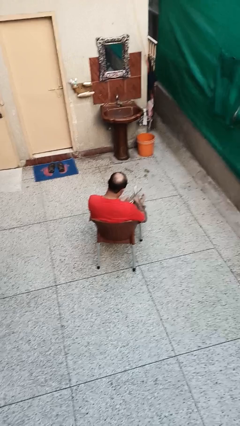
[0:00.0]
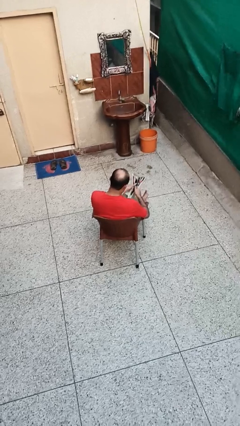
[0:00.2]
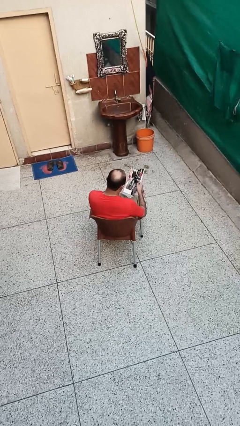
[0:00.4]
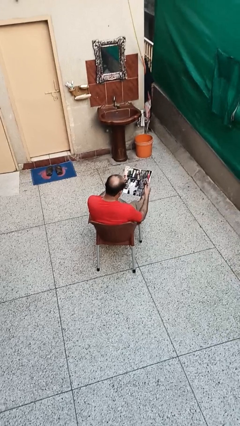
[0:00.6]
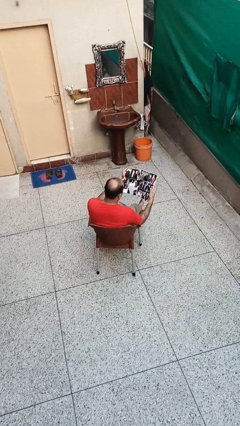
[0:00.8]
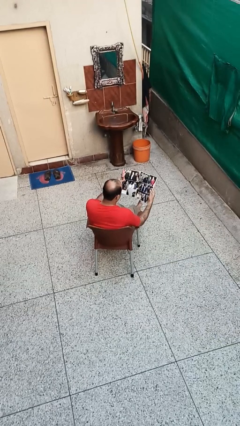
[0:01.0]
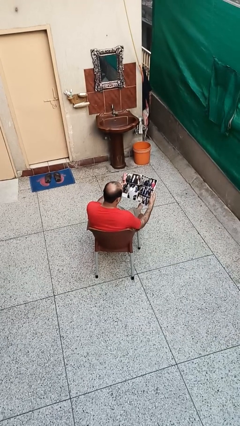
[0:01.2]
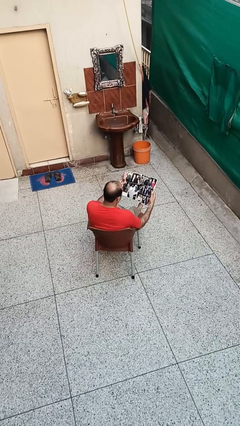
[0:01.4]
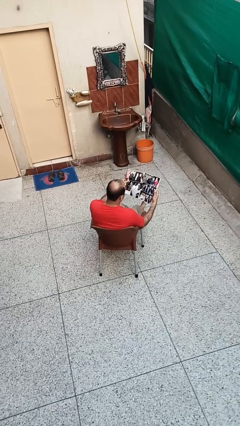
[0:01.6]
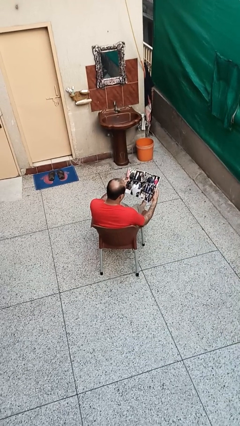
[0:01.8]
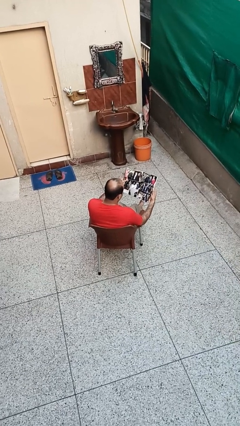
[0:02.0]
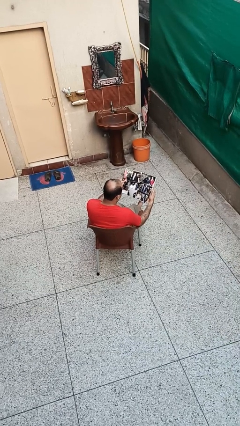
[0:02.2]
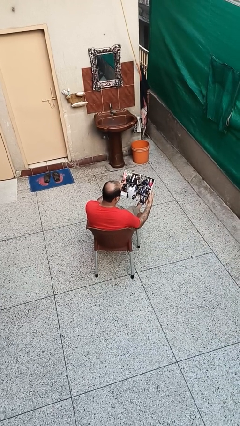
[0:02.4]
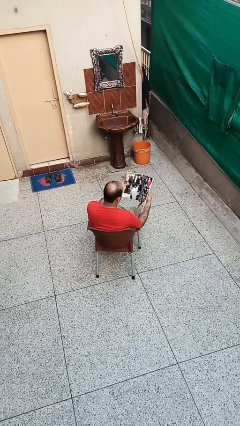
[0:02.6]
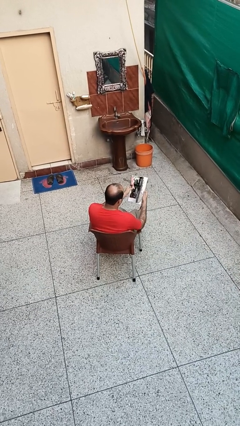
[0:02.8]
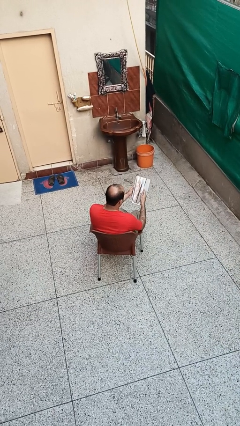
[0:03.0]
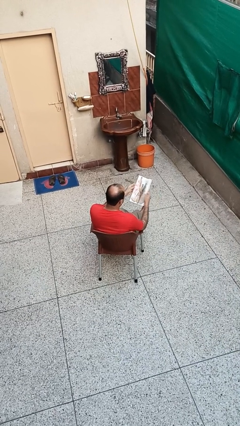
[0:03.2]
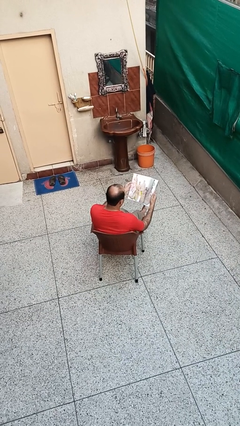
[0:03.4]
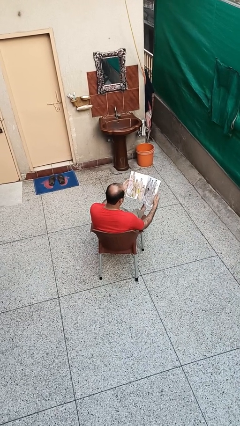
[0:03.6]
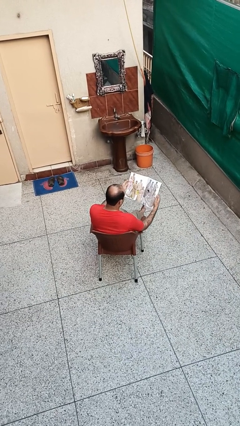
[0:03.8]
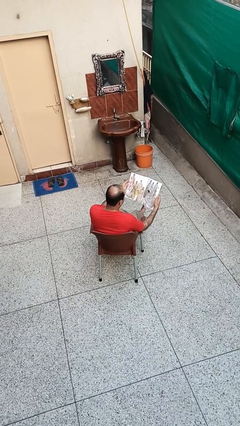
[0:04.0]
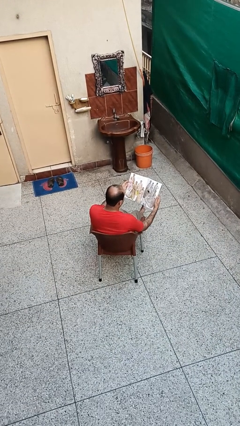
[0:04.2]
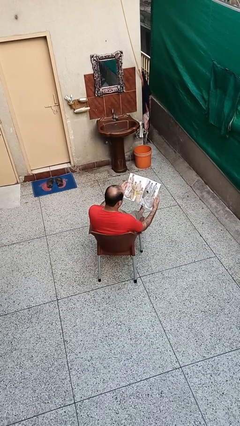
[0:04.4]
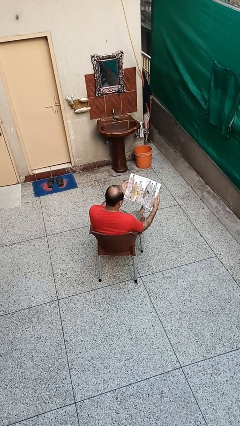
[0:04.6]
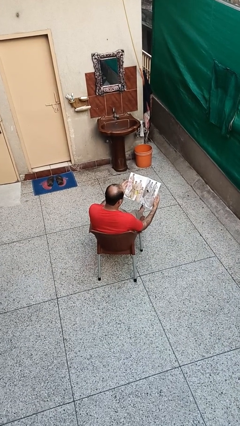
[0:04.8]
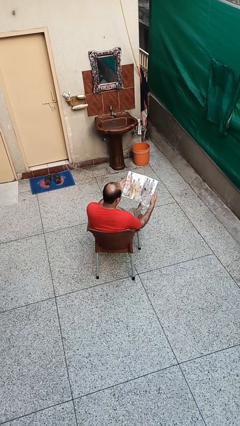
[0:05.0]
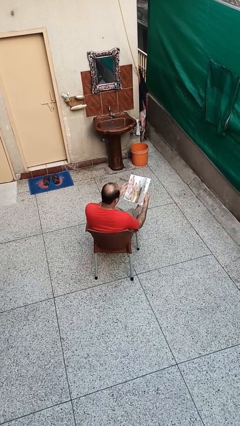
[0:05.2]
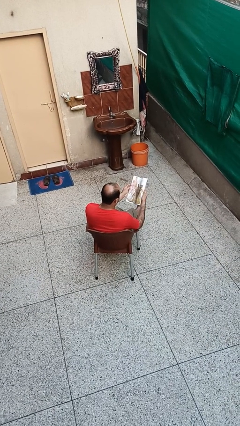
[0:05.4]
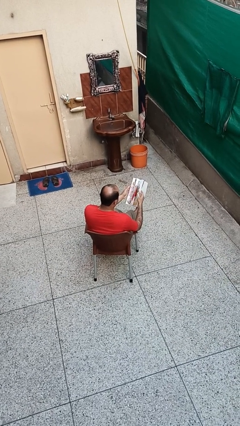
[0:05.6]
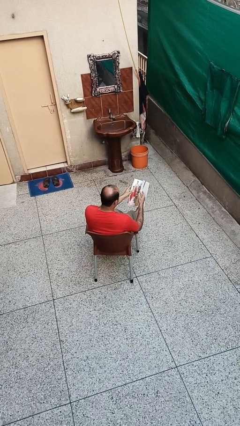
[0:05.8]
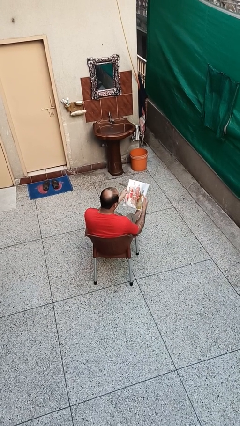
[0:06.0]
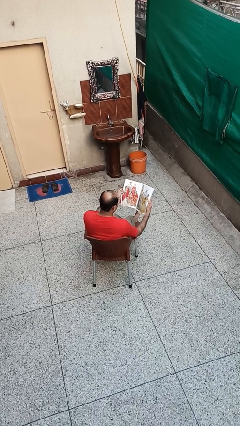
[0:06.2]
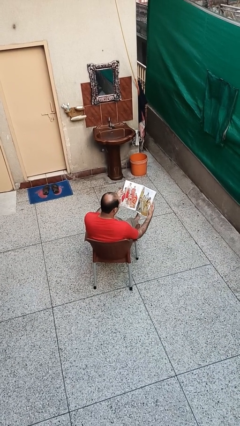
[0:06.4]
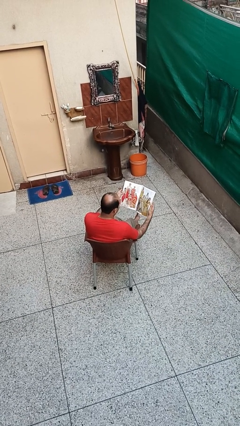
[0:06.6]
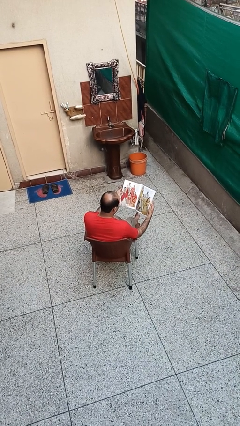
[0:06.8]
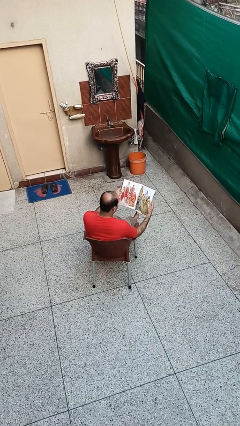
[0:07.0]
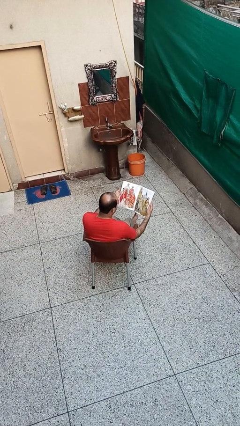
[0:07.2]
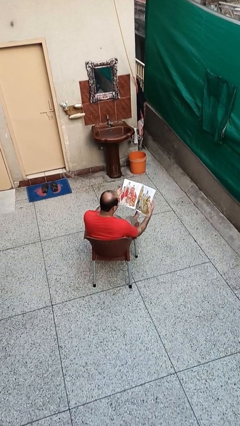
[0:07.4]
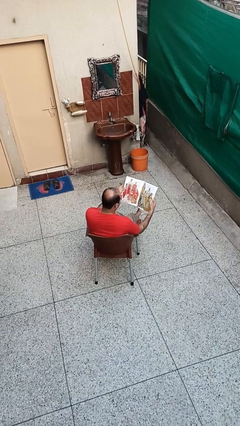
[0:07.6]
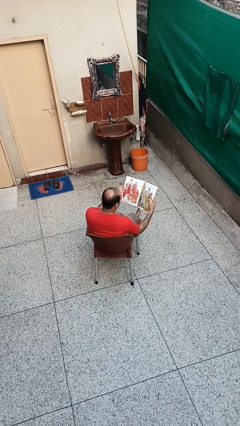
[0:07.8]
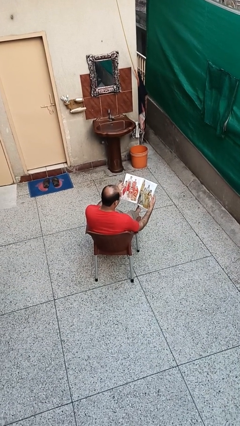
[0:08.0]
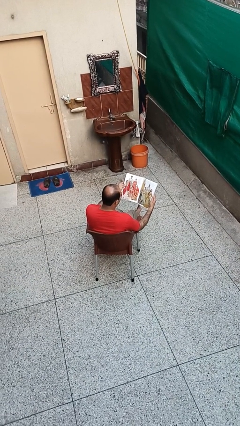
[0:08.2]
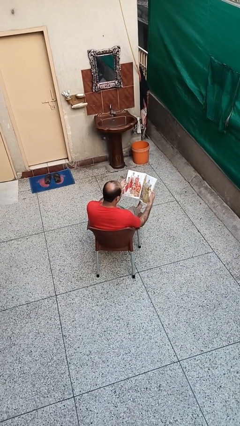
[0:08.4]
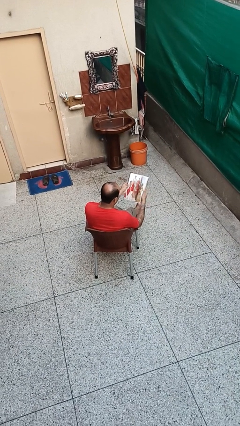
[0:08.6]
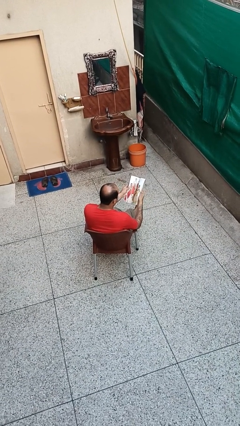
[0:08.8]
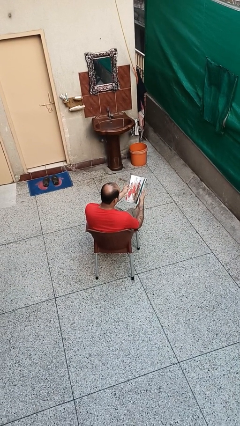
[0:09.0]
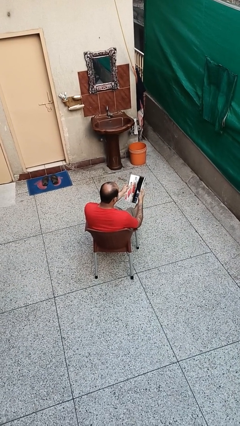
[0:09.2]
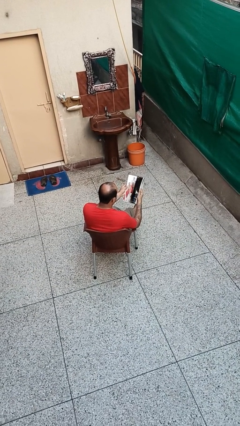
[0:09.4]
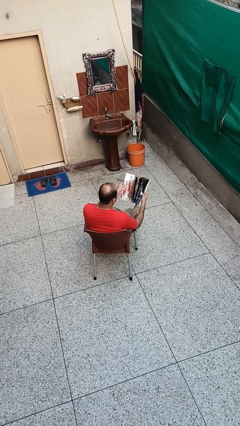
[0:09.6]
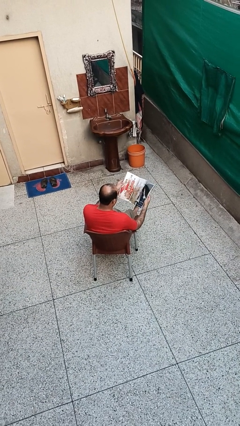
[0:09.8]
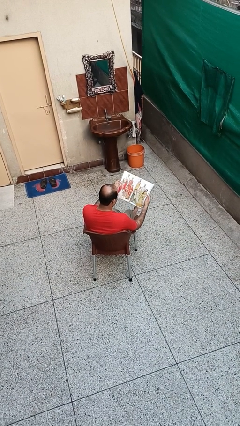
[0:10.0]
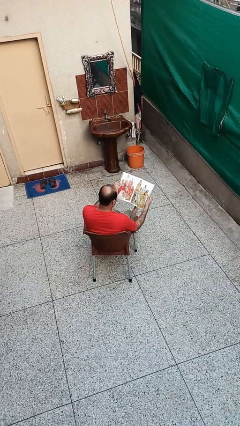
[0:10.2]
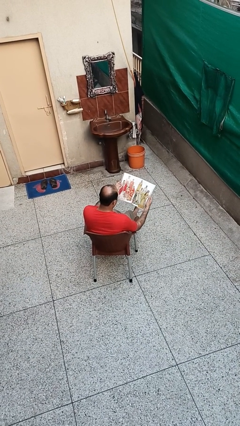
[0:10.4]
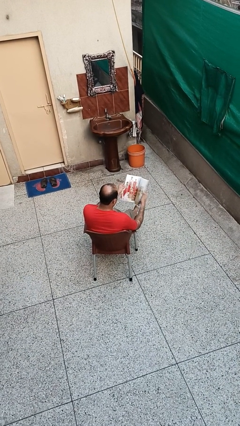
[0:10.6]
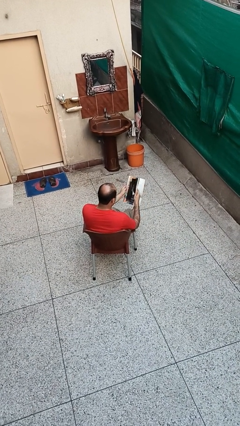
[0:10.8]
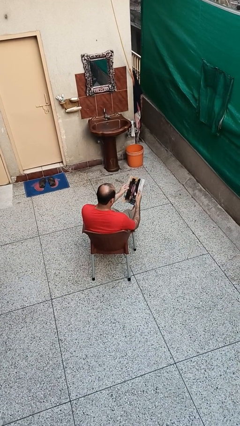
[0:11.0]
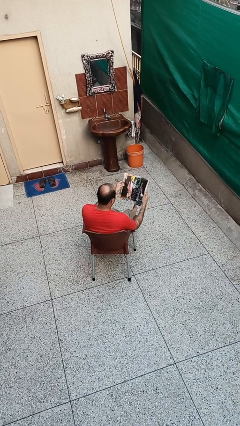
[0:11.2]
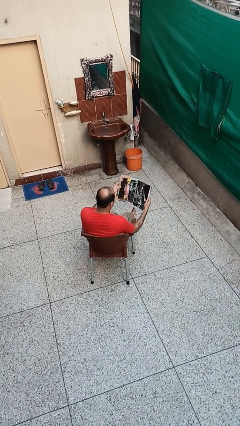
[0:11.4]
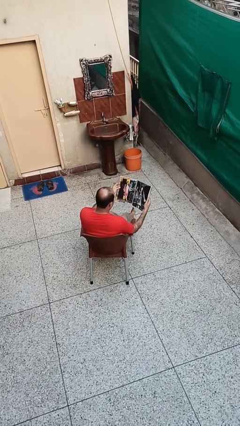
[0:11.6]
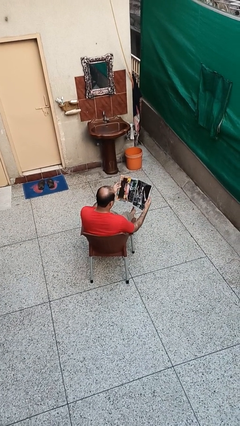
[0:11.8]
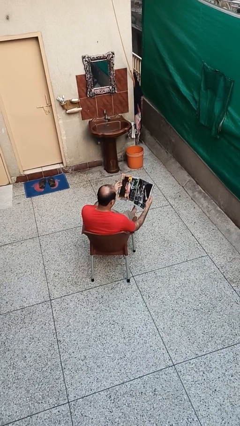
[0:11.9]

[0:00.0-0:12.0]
person reads magazine

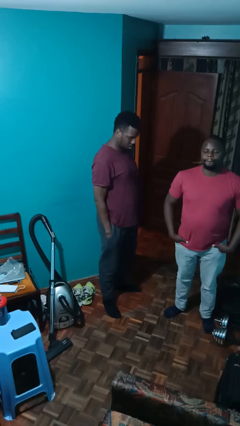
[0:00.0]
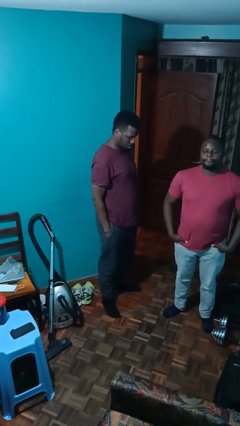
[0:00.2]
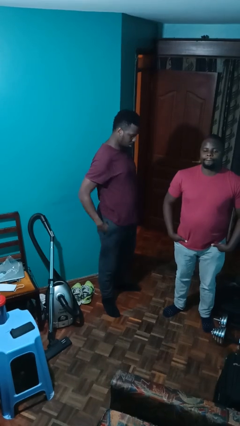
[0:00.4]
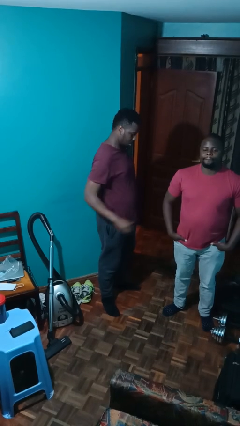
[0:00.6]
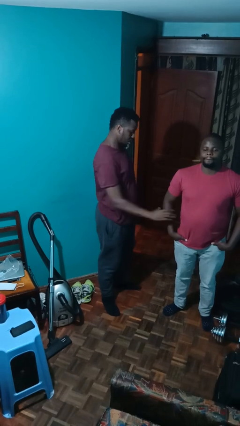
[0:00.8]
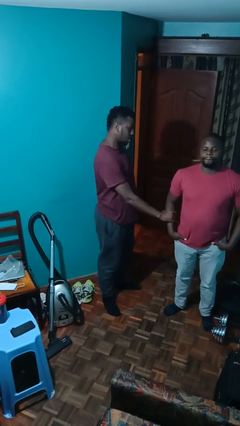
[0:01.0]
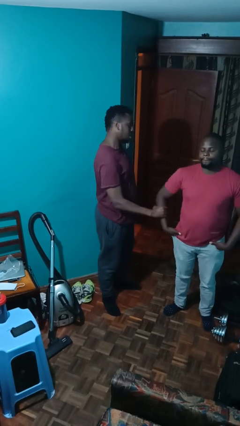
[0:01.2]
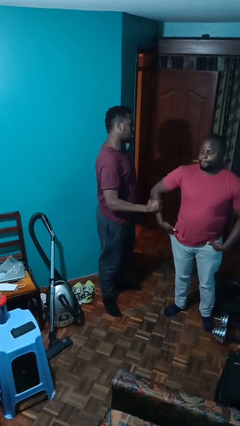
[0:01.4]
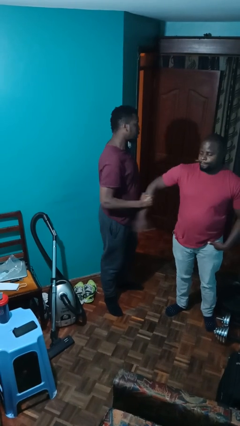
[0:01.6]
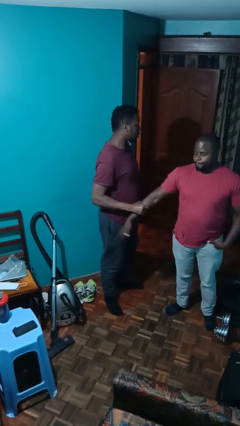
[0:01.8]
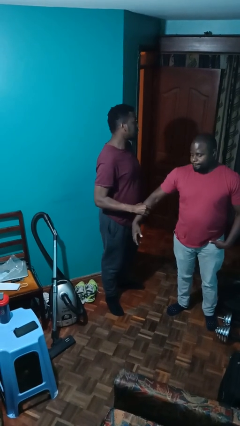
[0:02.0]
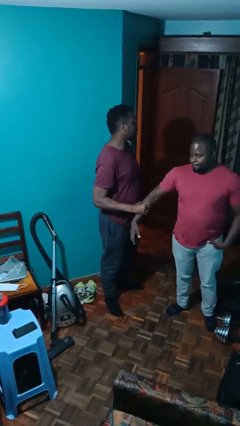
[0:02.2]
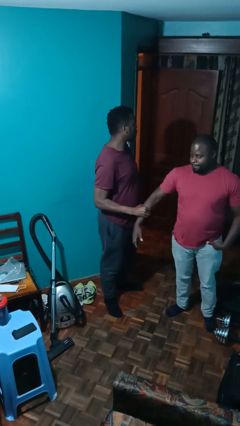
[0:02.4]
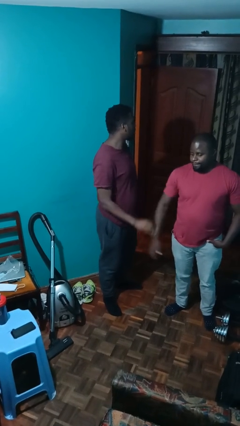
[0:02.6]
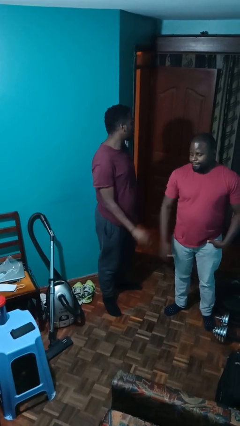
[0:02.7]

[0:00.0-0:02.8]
person grabs person by forearm

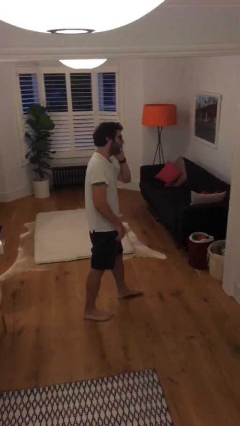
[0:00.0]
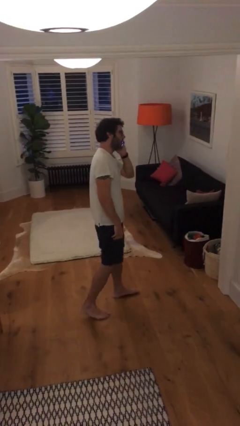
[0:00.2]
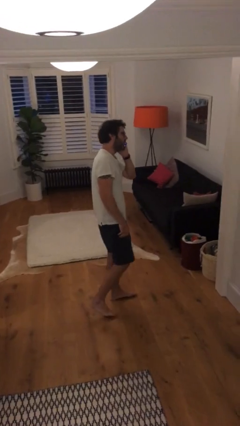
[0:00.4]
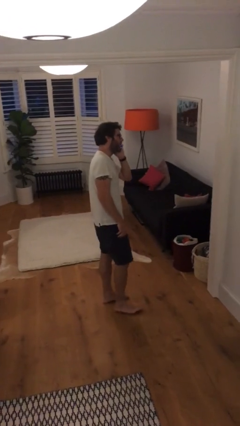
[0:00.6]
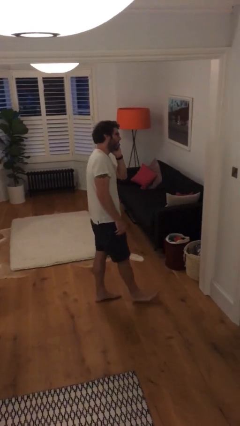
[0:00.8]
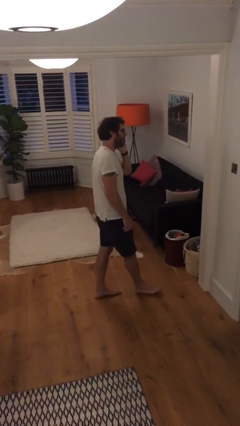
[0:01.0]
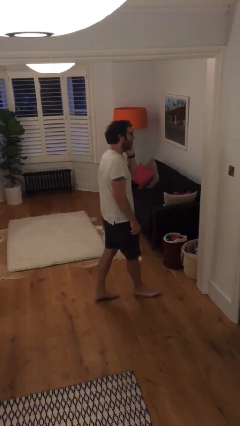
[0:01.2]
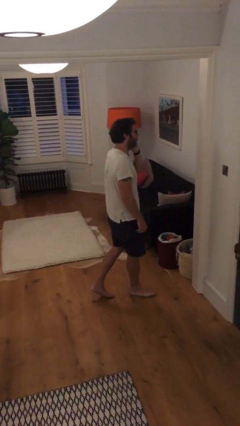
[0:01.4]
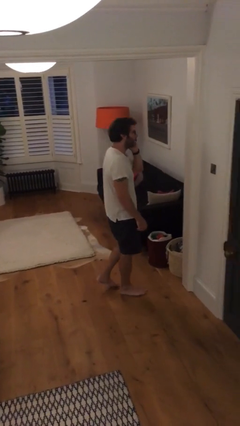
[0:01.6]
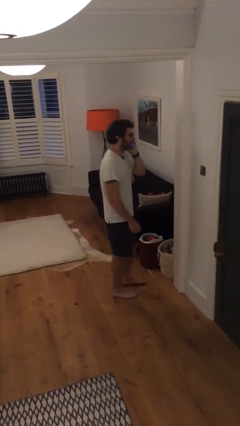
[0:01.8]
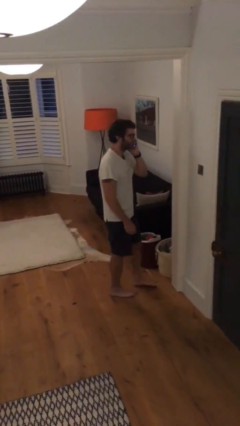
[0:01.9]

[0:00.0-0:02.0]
person talks on phone

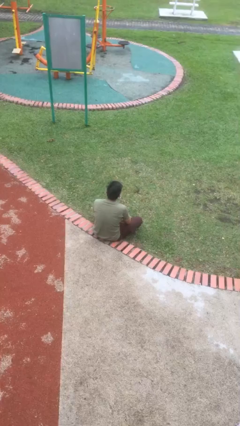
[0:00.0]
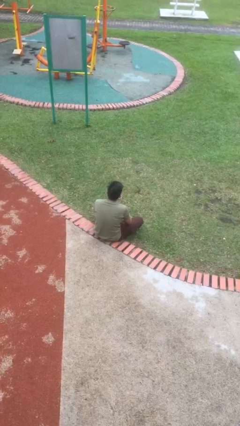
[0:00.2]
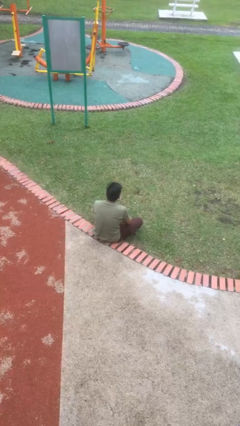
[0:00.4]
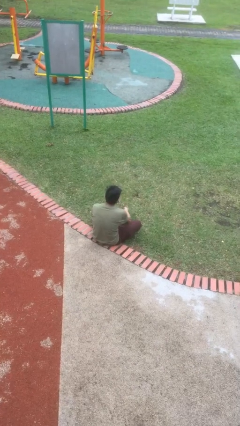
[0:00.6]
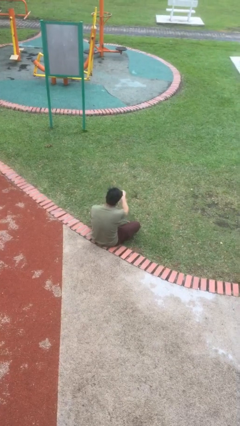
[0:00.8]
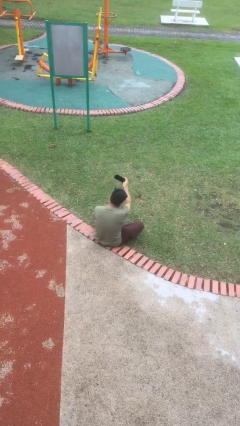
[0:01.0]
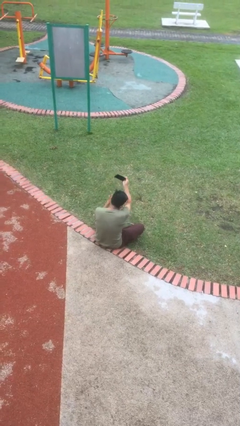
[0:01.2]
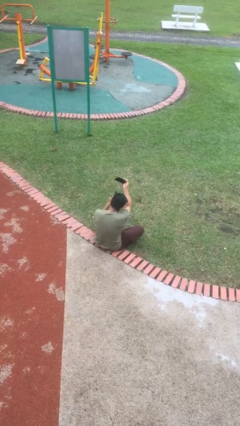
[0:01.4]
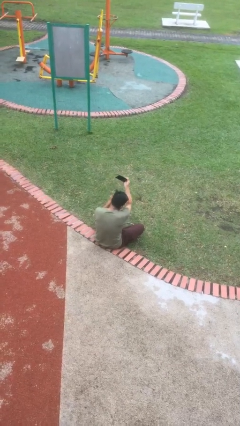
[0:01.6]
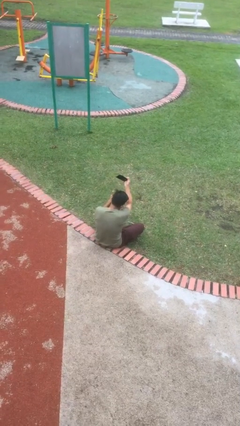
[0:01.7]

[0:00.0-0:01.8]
person takes selfie
